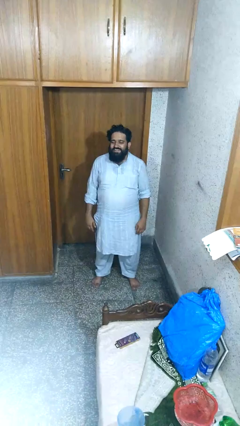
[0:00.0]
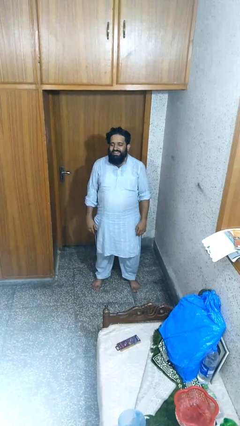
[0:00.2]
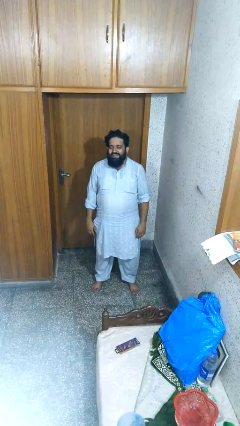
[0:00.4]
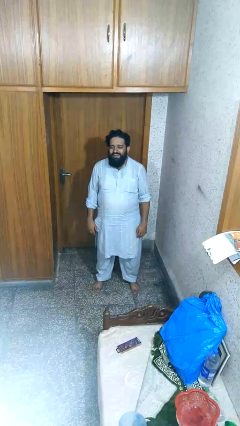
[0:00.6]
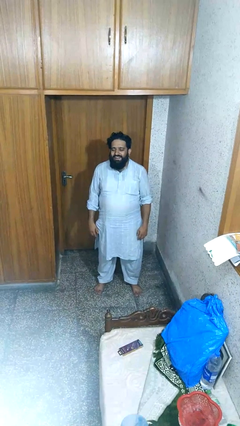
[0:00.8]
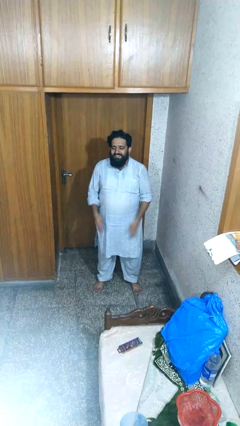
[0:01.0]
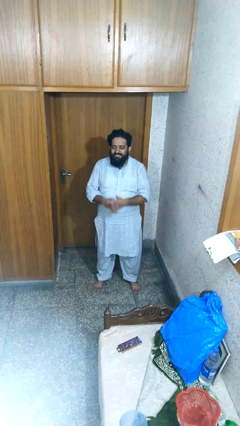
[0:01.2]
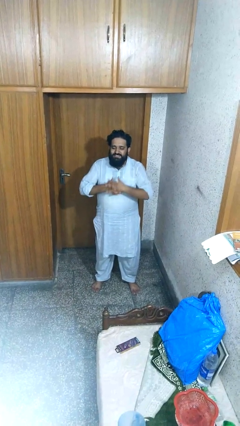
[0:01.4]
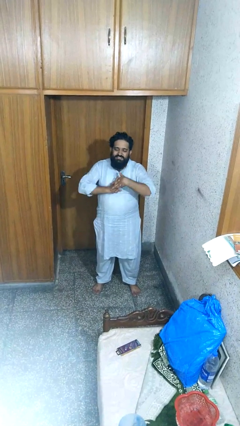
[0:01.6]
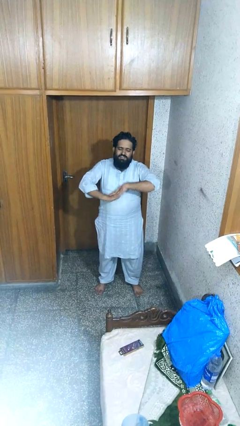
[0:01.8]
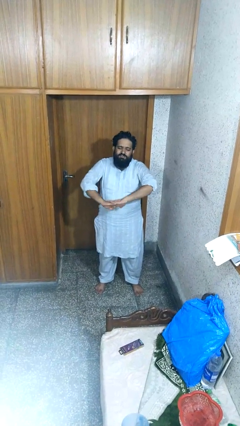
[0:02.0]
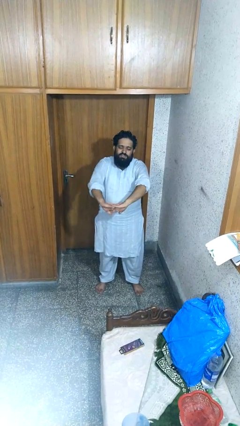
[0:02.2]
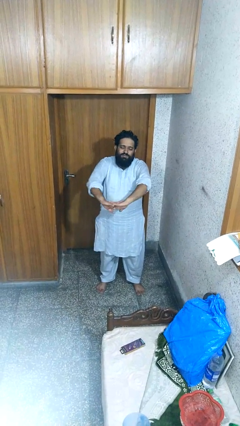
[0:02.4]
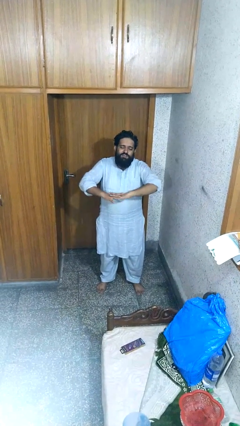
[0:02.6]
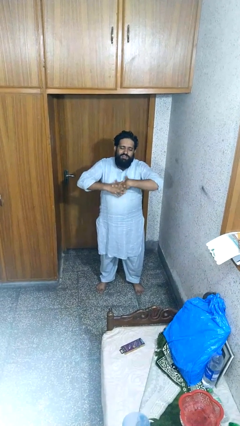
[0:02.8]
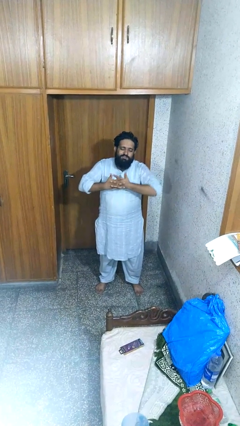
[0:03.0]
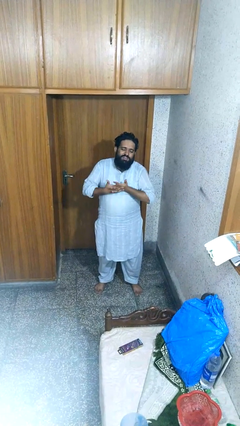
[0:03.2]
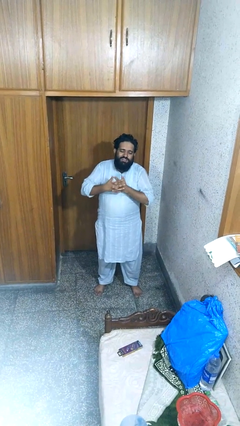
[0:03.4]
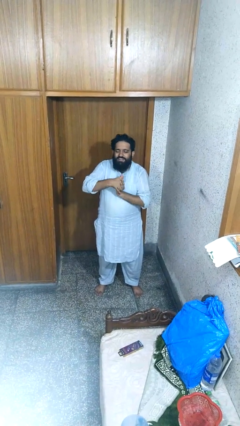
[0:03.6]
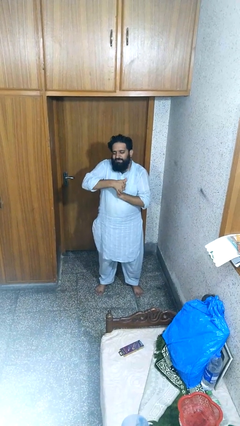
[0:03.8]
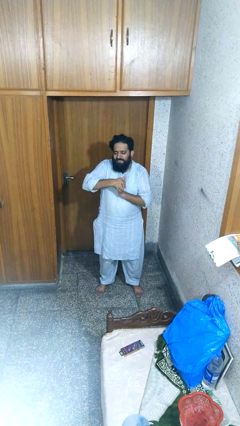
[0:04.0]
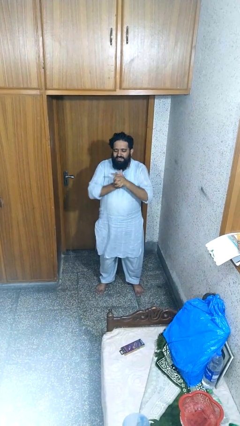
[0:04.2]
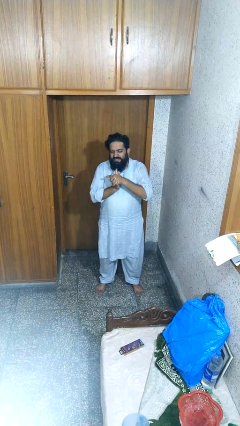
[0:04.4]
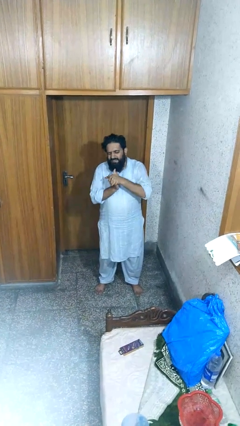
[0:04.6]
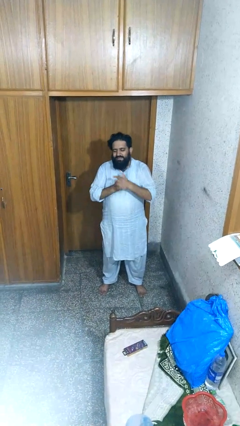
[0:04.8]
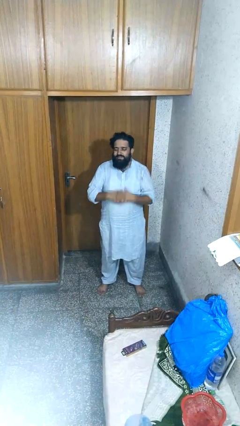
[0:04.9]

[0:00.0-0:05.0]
person cracks knuckles

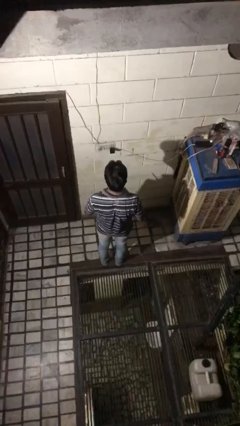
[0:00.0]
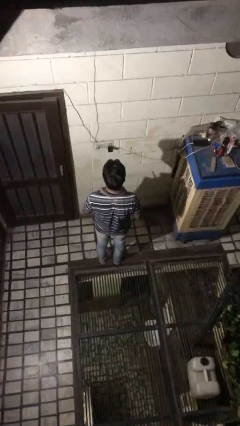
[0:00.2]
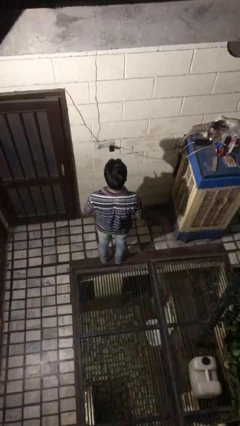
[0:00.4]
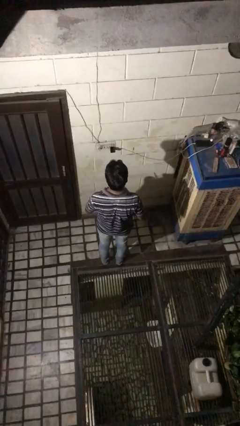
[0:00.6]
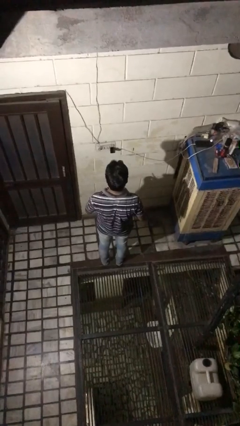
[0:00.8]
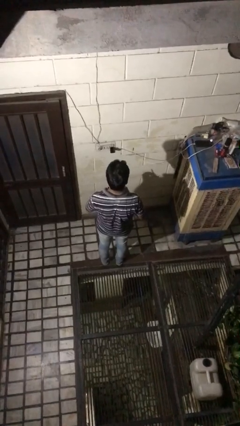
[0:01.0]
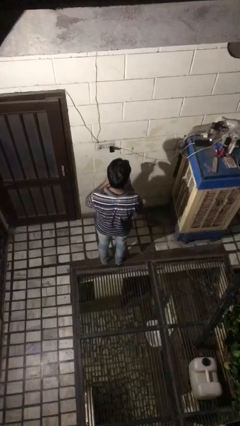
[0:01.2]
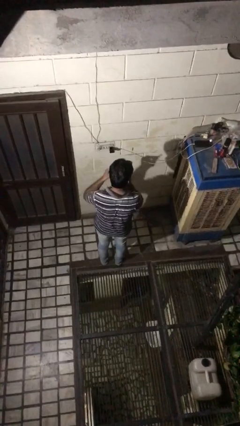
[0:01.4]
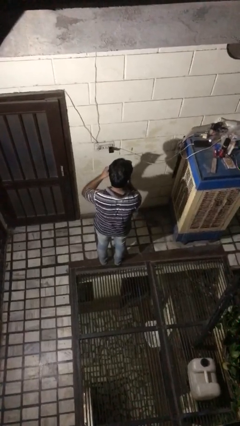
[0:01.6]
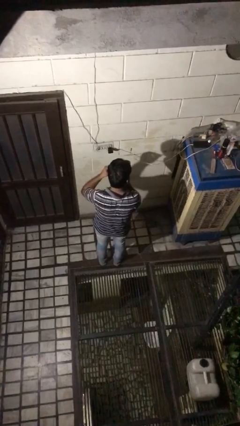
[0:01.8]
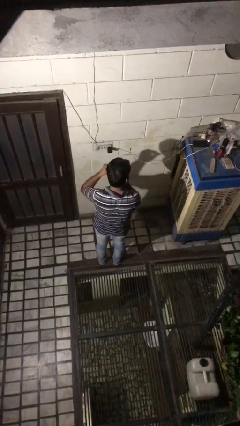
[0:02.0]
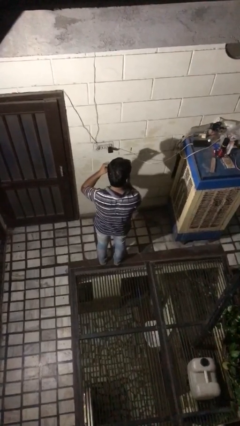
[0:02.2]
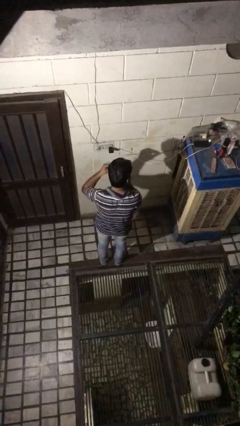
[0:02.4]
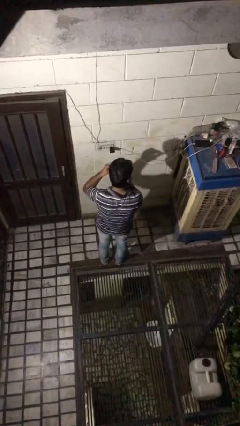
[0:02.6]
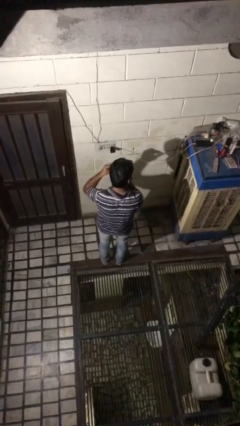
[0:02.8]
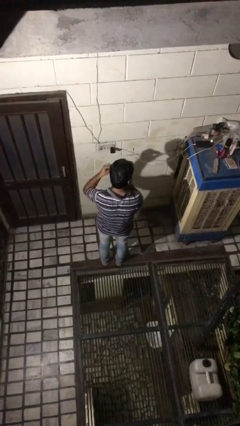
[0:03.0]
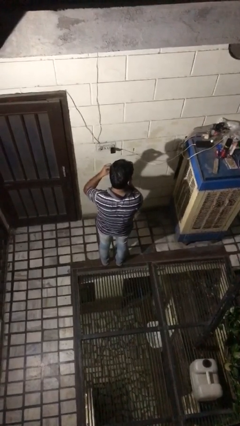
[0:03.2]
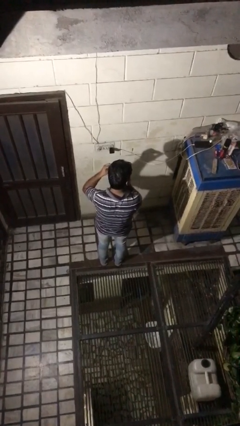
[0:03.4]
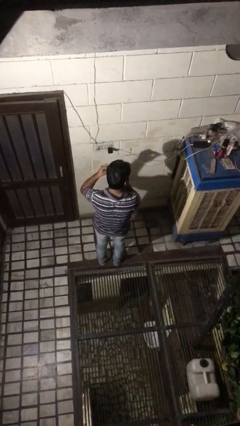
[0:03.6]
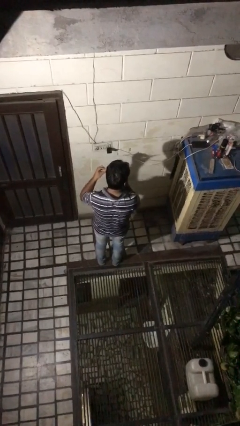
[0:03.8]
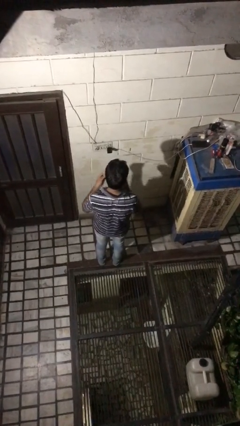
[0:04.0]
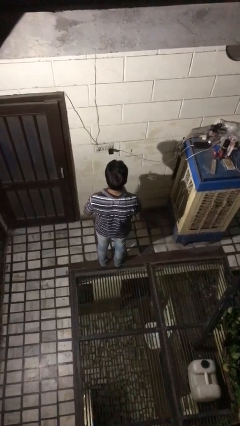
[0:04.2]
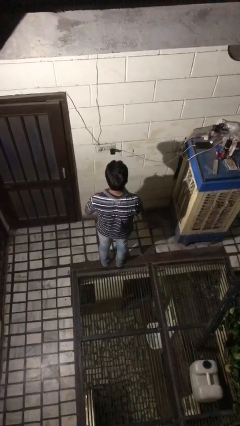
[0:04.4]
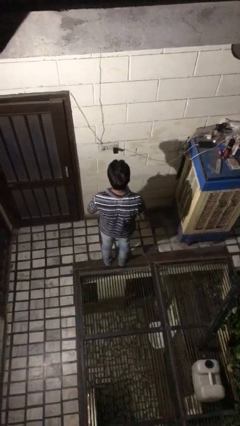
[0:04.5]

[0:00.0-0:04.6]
person applies eye makeup

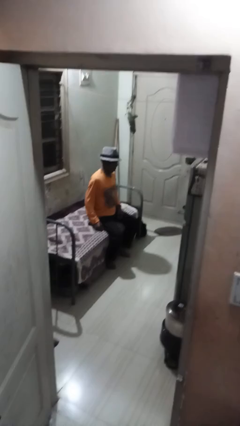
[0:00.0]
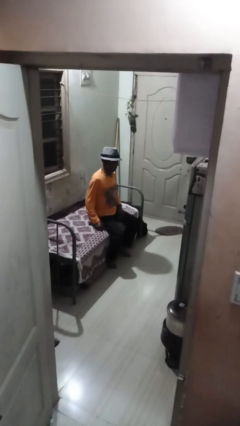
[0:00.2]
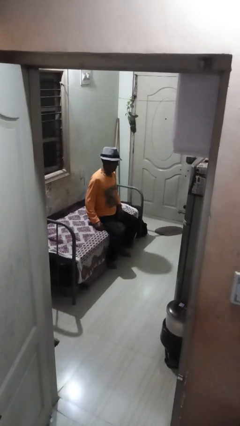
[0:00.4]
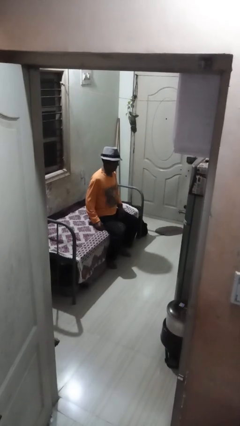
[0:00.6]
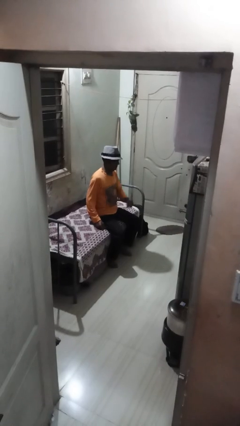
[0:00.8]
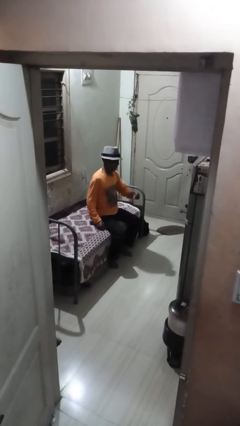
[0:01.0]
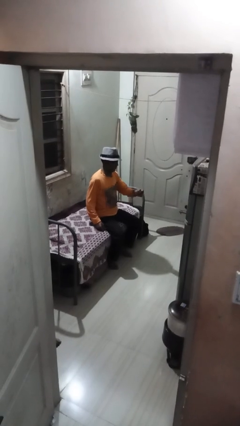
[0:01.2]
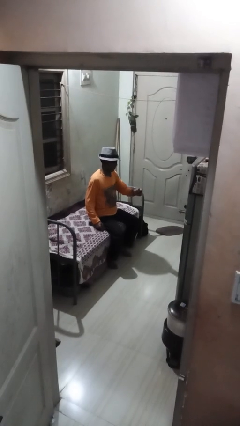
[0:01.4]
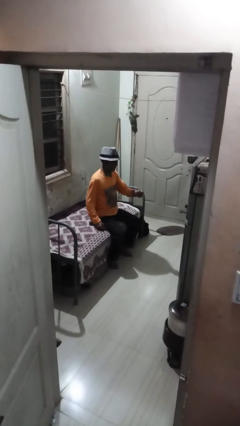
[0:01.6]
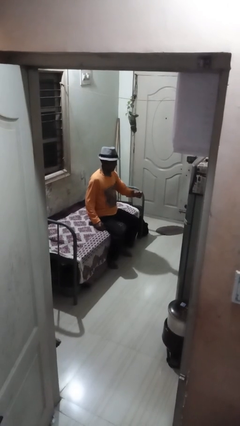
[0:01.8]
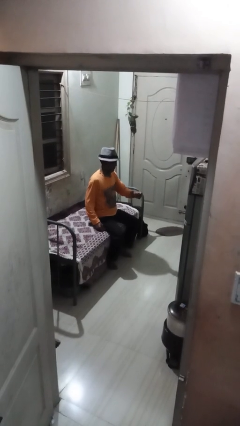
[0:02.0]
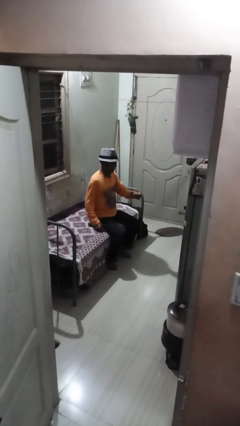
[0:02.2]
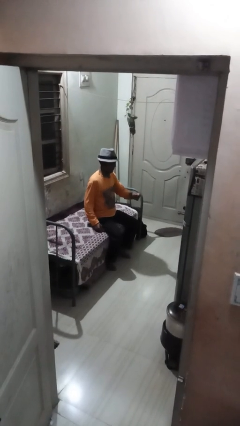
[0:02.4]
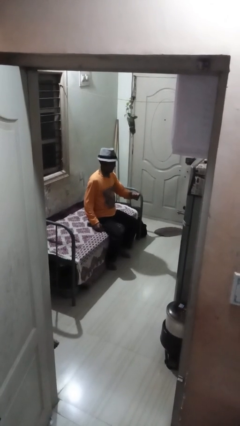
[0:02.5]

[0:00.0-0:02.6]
person snaps fingers

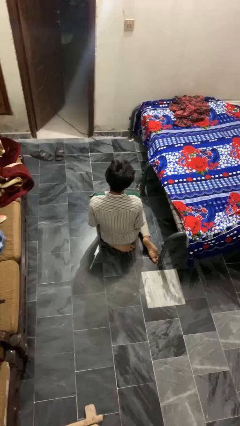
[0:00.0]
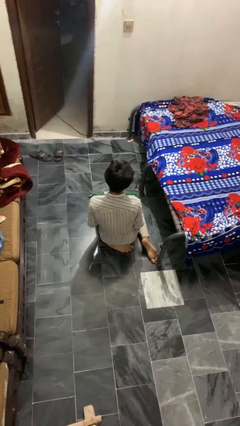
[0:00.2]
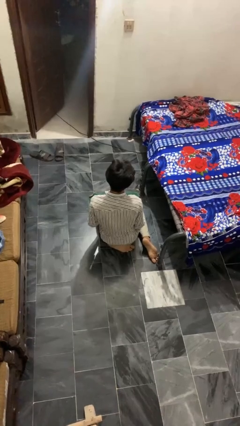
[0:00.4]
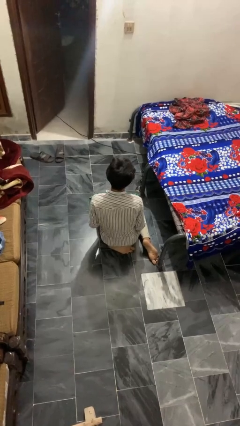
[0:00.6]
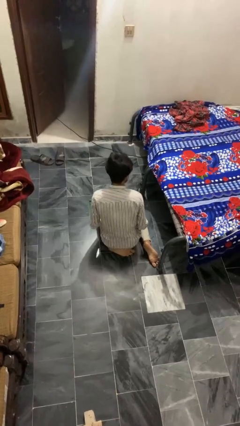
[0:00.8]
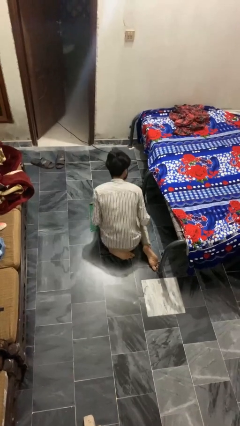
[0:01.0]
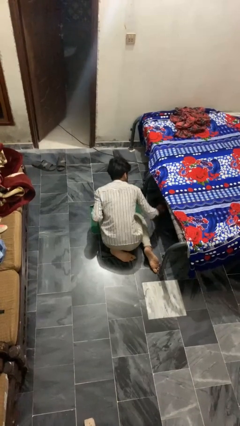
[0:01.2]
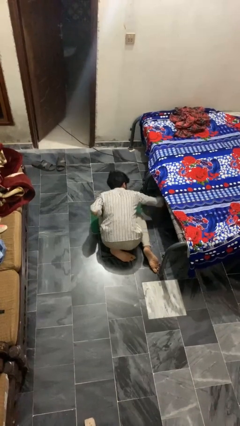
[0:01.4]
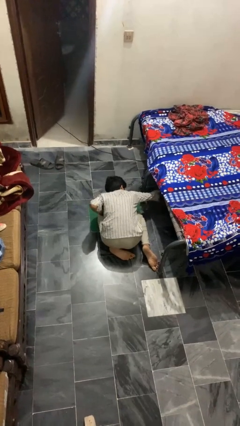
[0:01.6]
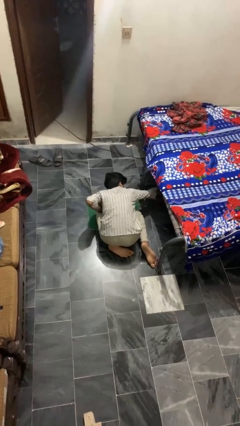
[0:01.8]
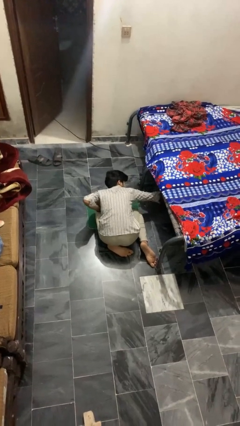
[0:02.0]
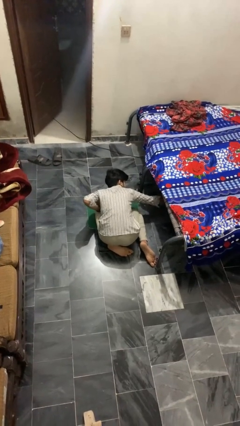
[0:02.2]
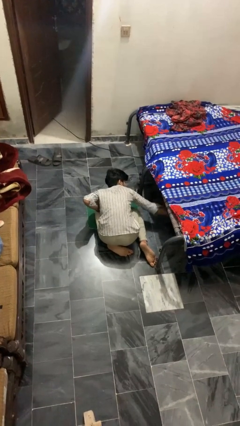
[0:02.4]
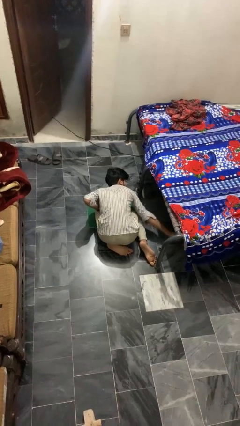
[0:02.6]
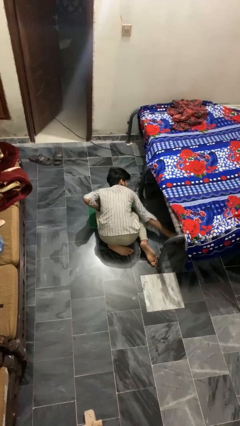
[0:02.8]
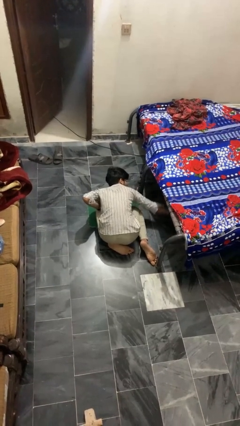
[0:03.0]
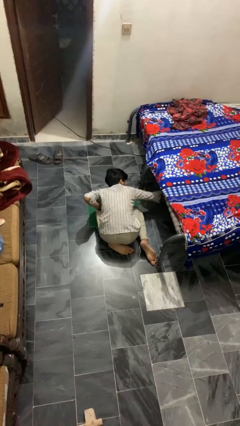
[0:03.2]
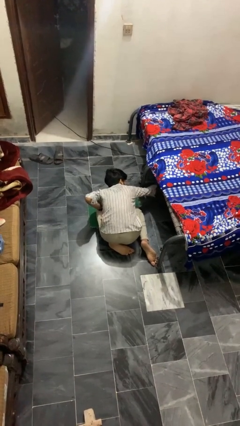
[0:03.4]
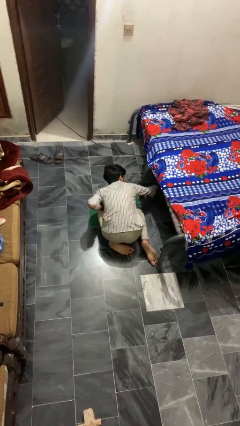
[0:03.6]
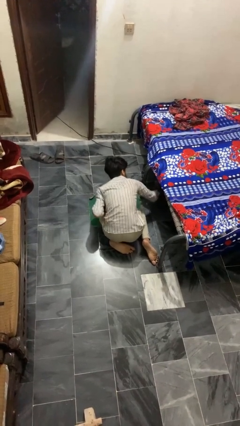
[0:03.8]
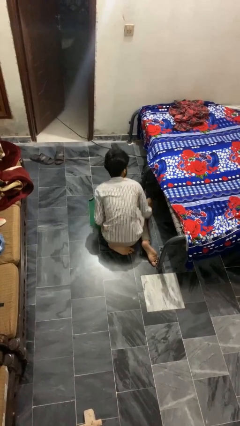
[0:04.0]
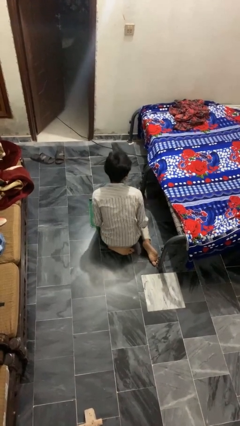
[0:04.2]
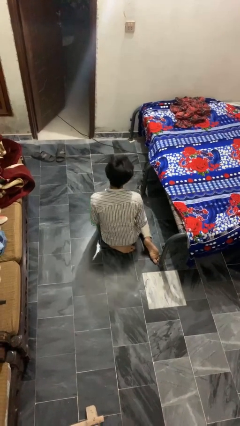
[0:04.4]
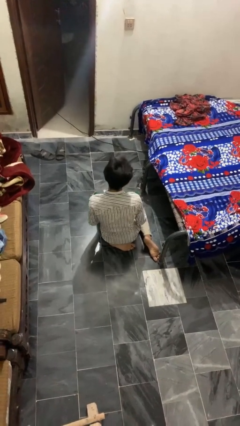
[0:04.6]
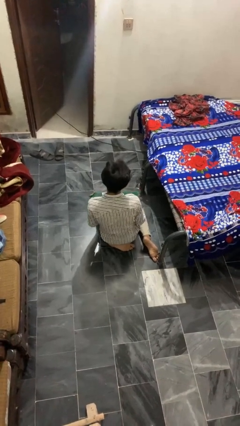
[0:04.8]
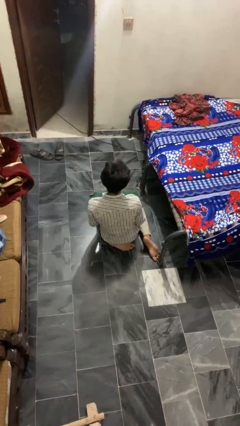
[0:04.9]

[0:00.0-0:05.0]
person searches under bed

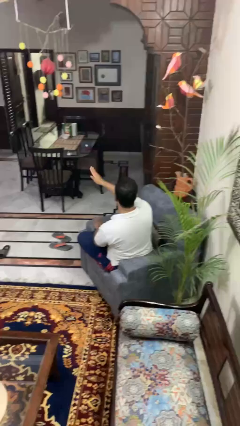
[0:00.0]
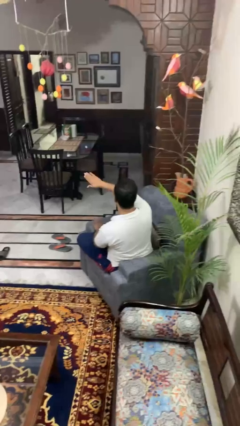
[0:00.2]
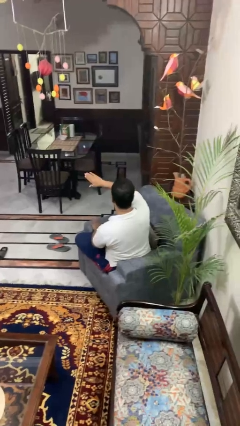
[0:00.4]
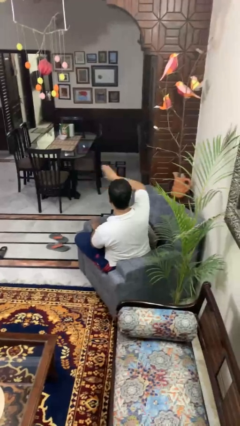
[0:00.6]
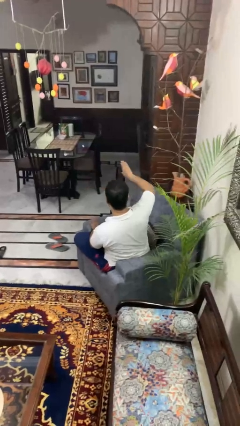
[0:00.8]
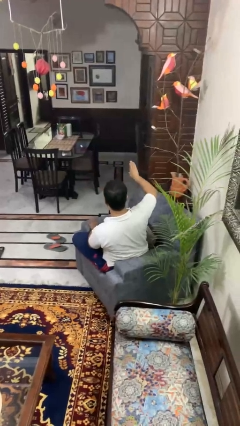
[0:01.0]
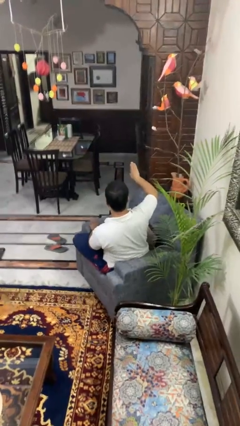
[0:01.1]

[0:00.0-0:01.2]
person gestures swipe right
